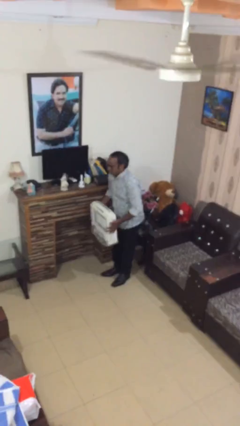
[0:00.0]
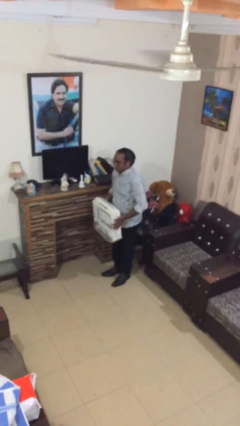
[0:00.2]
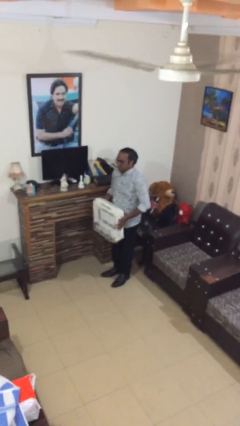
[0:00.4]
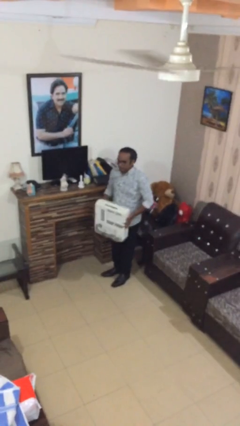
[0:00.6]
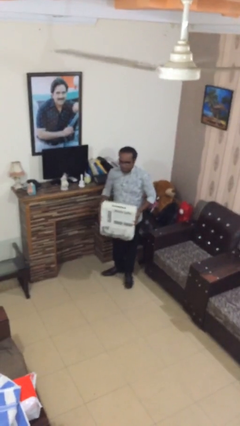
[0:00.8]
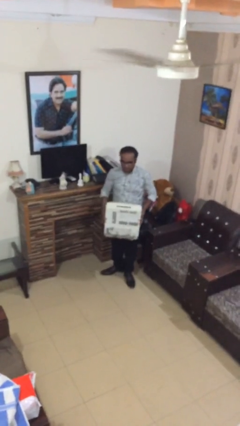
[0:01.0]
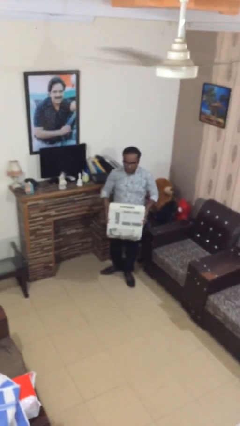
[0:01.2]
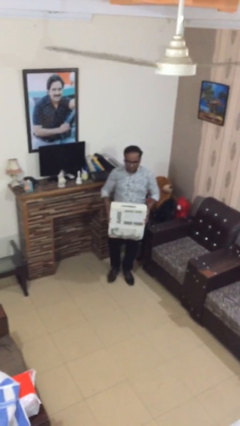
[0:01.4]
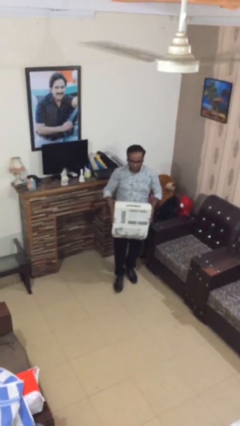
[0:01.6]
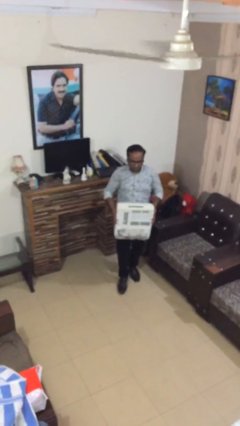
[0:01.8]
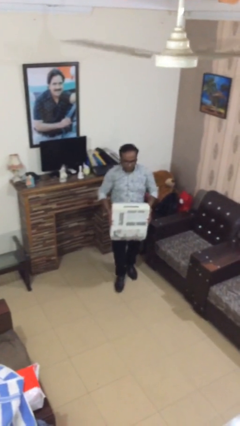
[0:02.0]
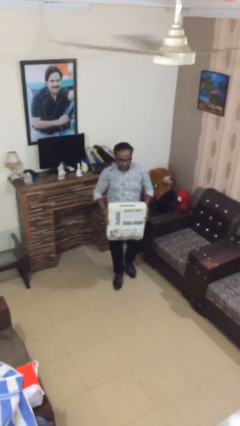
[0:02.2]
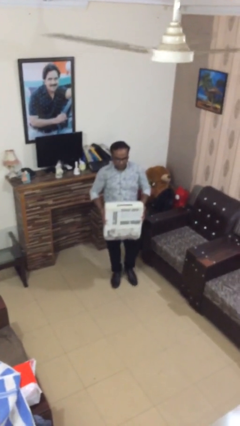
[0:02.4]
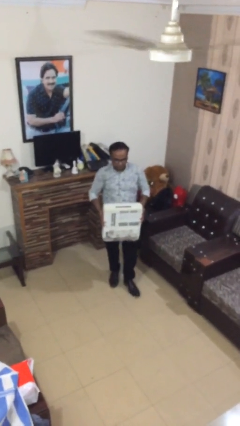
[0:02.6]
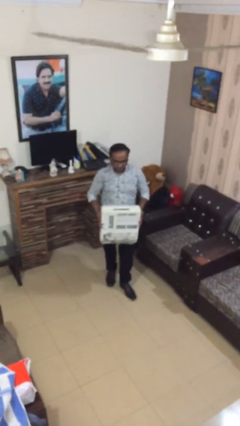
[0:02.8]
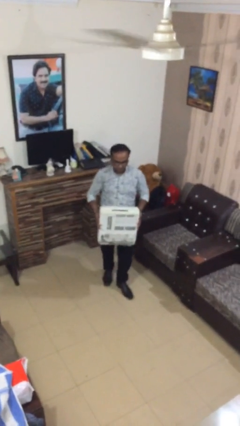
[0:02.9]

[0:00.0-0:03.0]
person carries heavy object

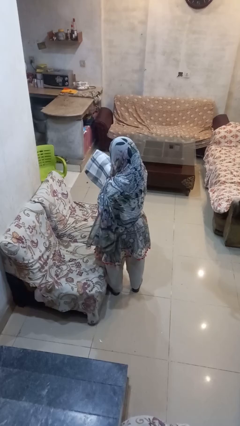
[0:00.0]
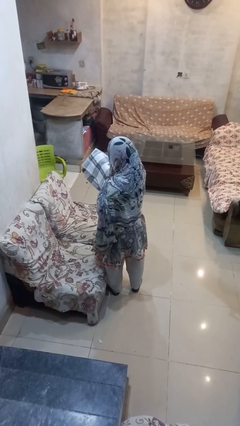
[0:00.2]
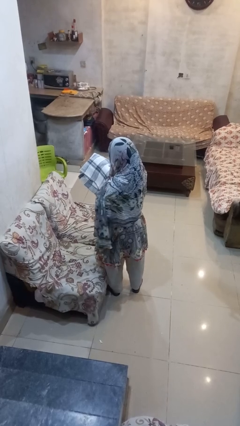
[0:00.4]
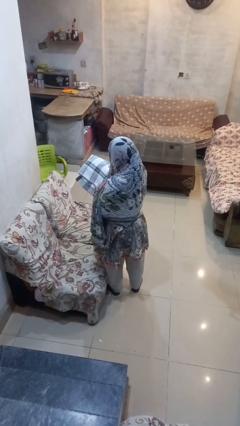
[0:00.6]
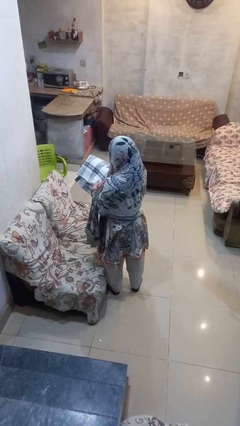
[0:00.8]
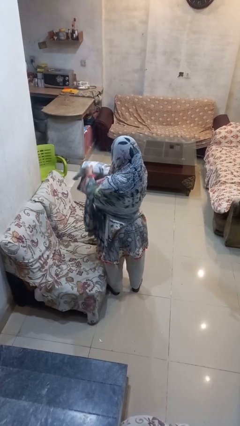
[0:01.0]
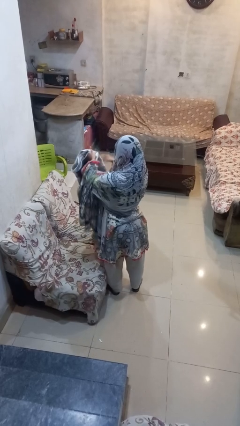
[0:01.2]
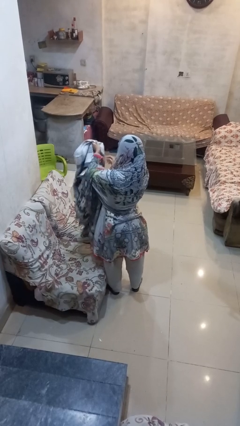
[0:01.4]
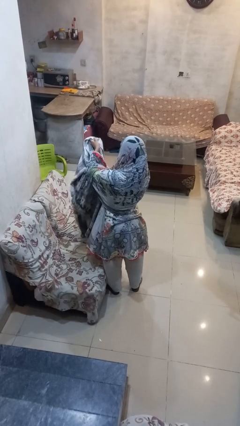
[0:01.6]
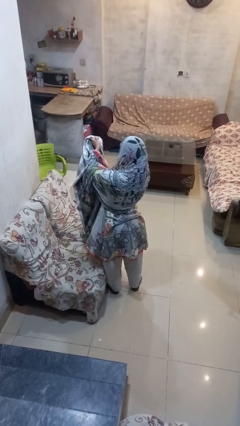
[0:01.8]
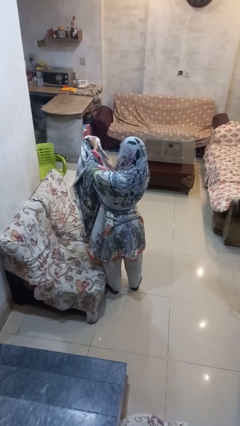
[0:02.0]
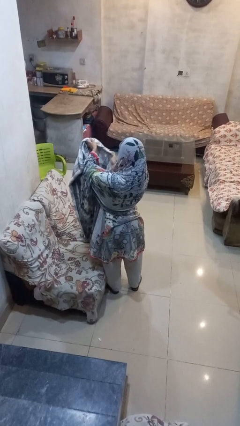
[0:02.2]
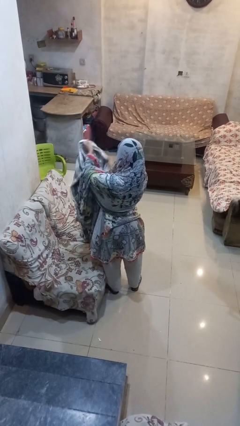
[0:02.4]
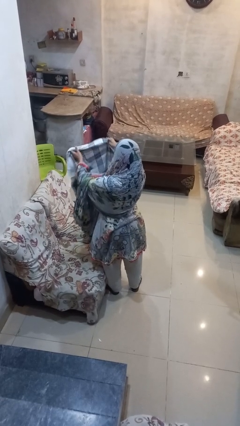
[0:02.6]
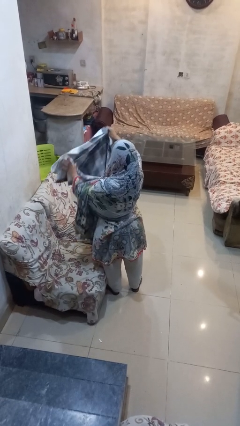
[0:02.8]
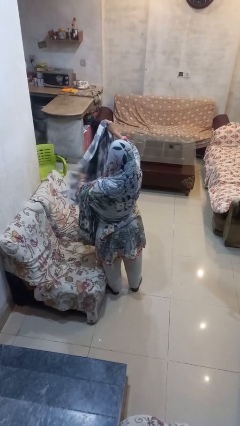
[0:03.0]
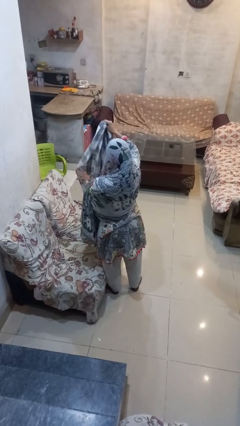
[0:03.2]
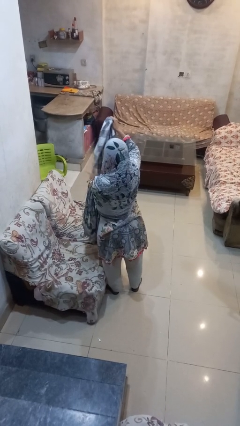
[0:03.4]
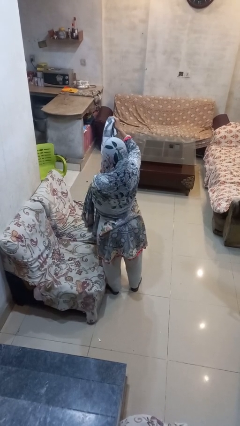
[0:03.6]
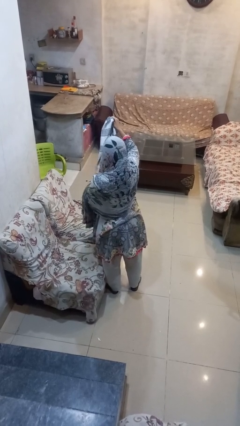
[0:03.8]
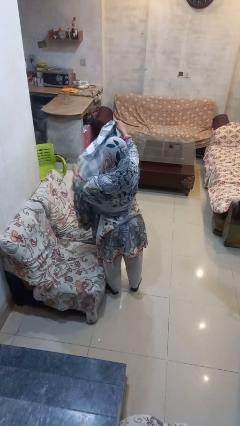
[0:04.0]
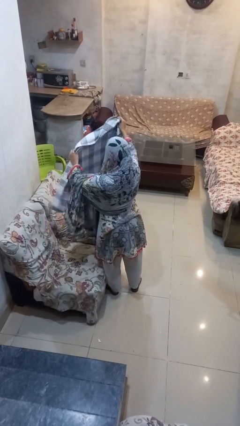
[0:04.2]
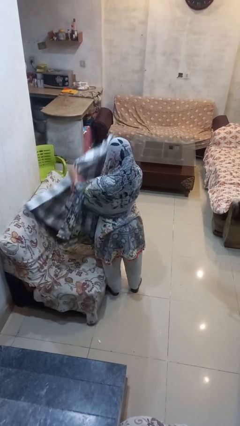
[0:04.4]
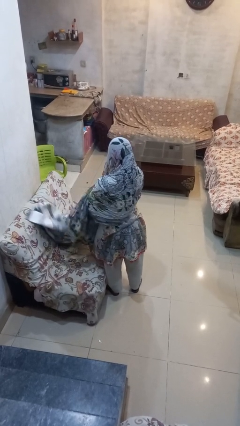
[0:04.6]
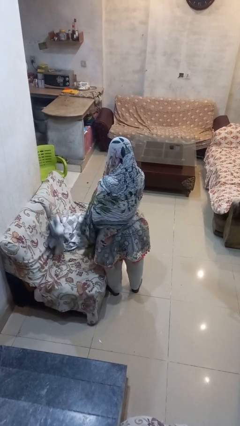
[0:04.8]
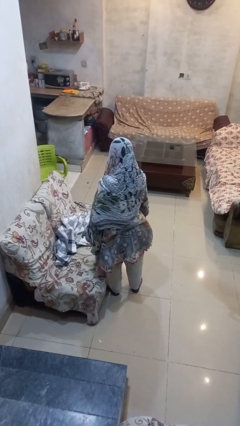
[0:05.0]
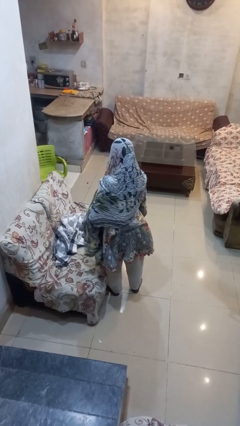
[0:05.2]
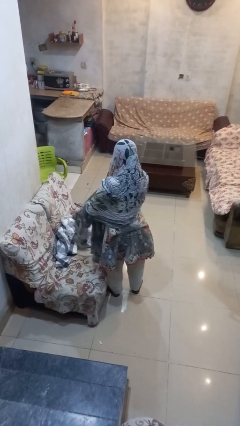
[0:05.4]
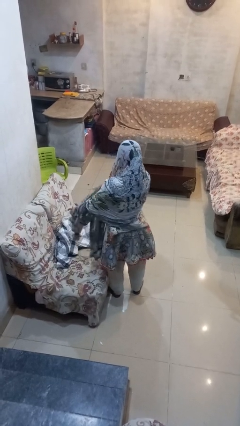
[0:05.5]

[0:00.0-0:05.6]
person unfolds blanket

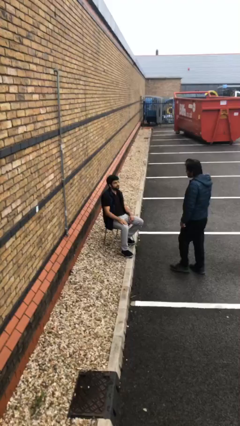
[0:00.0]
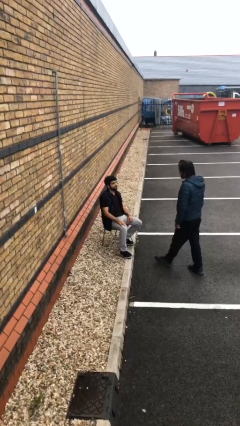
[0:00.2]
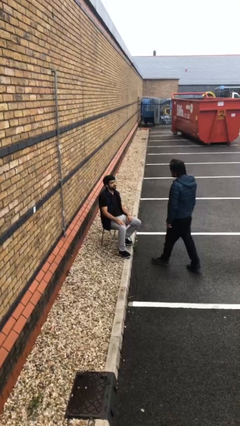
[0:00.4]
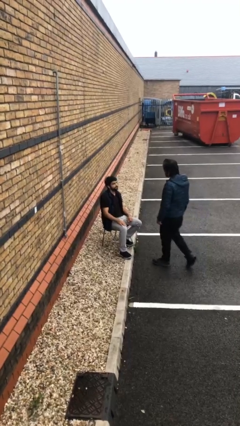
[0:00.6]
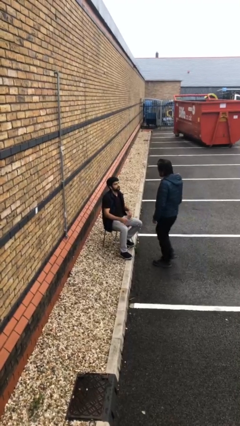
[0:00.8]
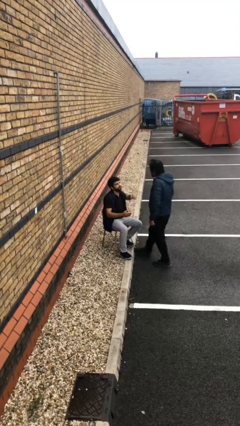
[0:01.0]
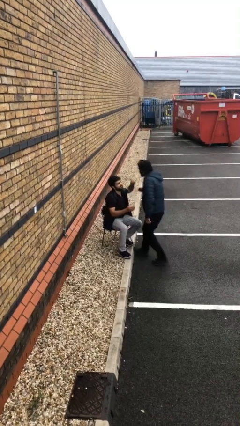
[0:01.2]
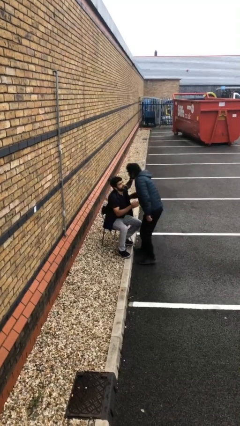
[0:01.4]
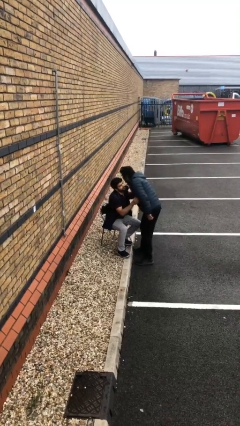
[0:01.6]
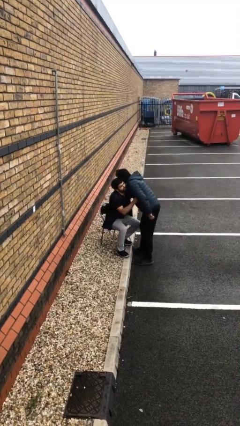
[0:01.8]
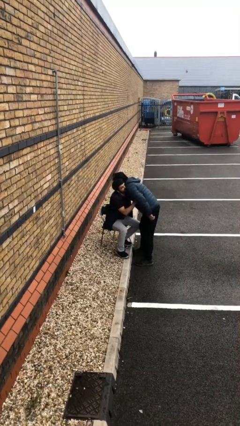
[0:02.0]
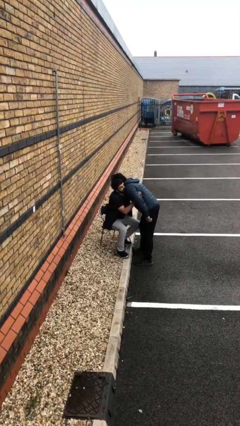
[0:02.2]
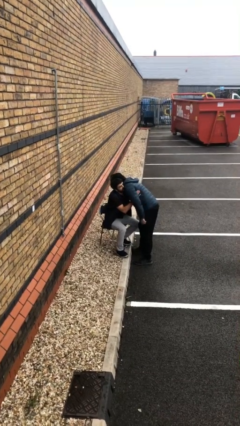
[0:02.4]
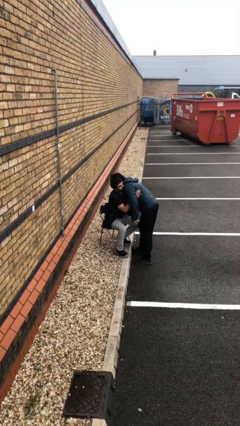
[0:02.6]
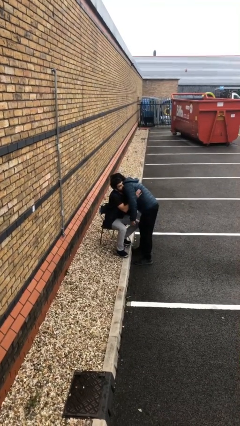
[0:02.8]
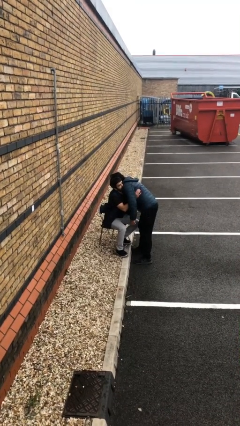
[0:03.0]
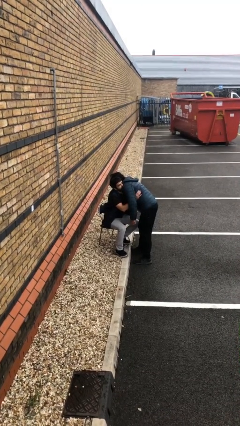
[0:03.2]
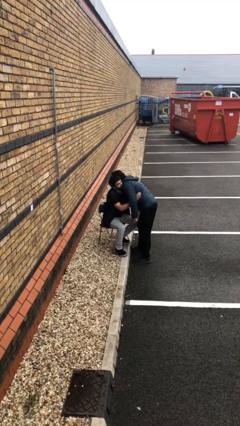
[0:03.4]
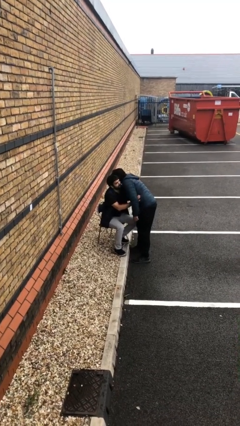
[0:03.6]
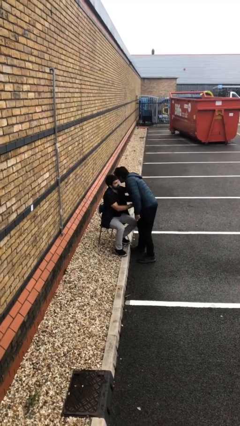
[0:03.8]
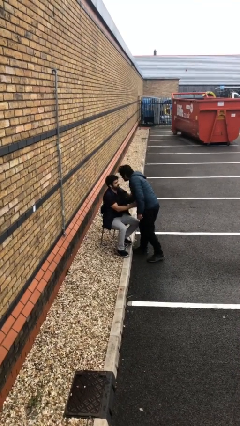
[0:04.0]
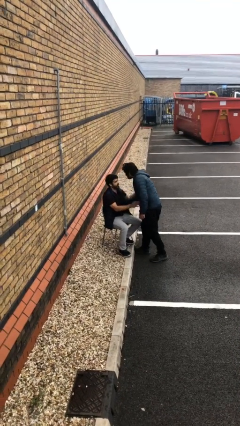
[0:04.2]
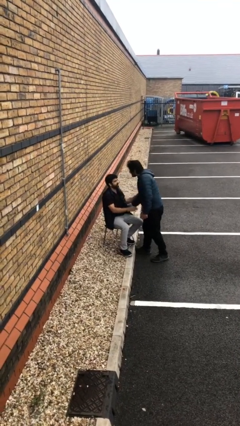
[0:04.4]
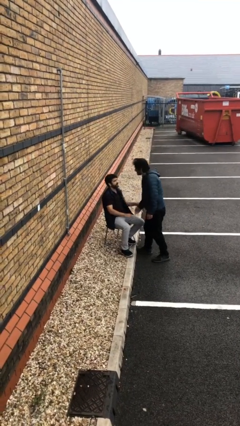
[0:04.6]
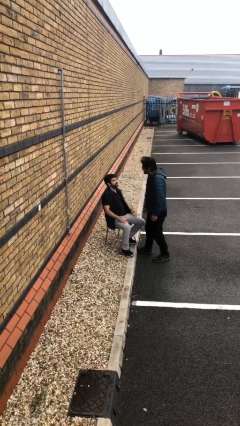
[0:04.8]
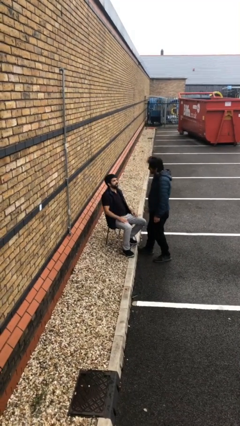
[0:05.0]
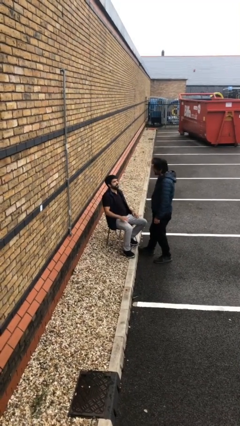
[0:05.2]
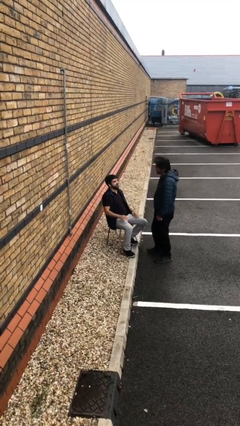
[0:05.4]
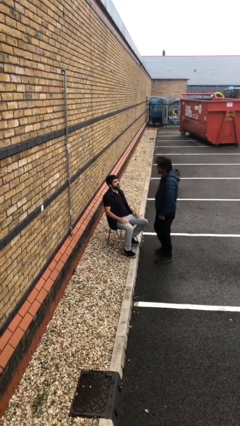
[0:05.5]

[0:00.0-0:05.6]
person embraces person

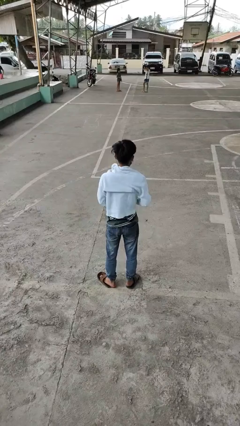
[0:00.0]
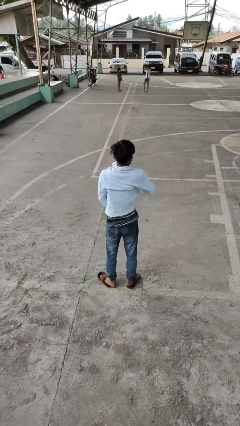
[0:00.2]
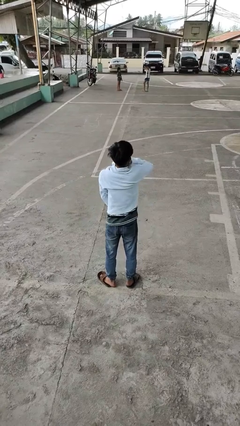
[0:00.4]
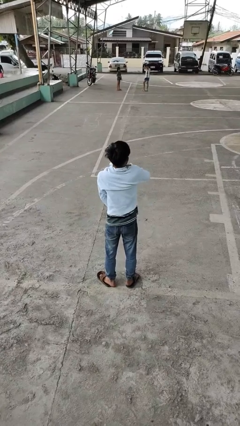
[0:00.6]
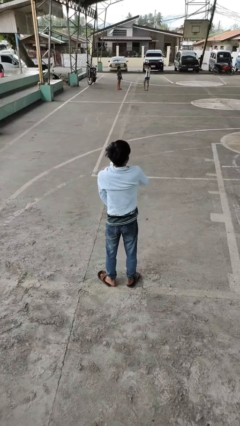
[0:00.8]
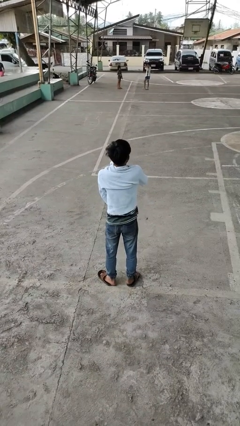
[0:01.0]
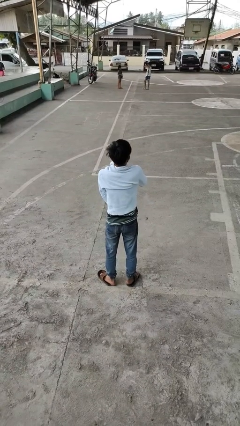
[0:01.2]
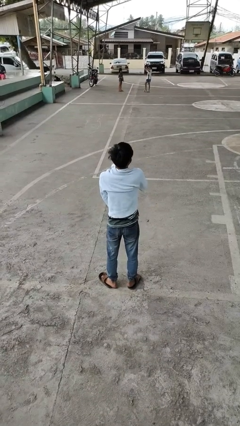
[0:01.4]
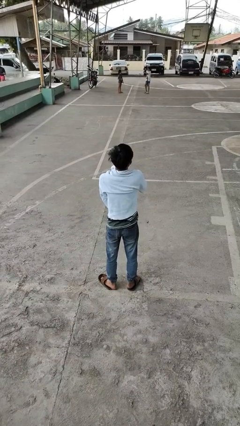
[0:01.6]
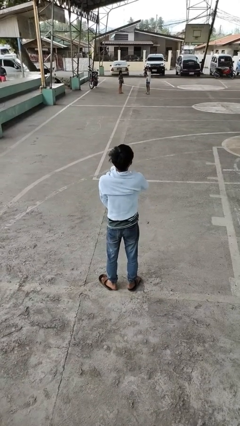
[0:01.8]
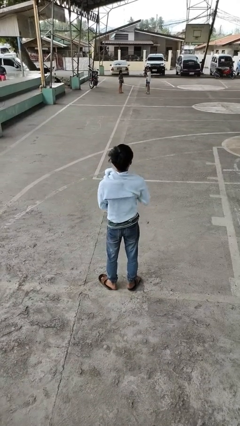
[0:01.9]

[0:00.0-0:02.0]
person zips up jacket

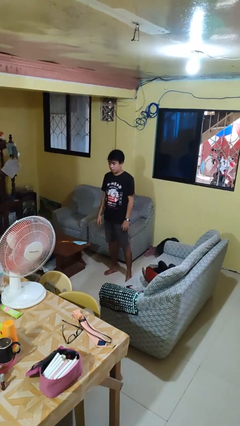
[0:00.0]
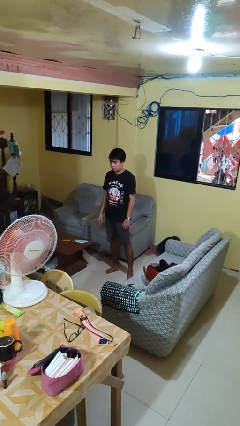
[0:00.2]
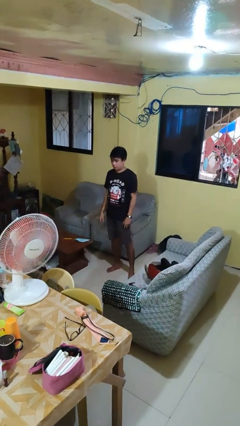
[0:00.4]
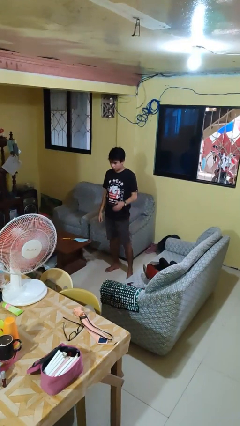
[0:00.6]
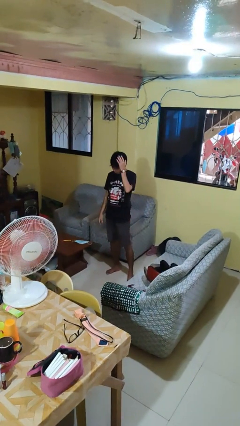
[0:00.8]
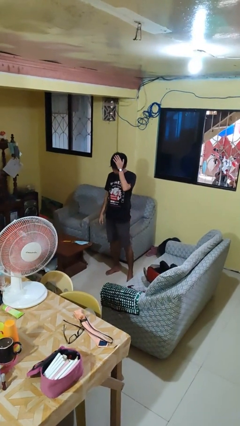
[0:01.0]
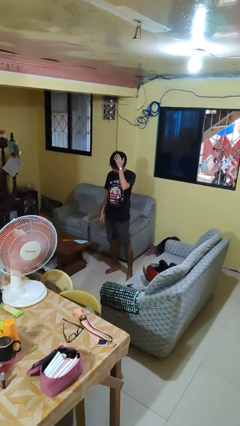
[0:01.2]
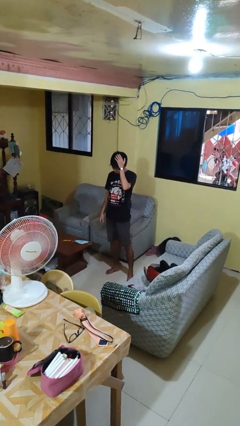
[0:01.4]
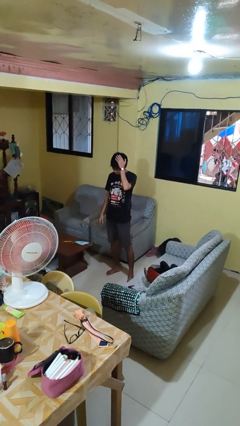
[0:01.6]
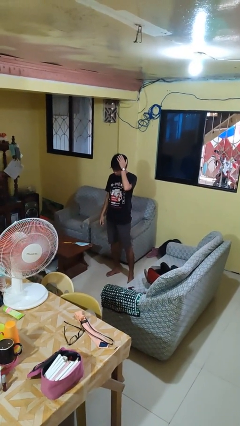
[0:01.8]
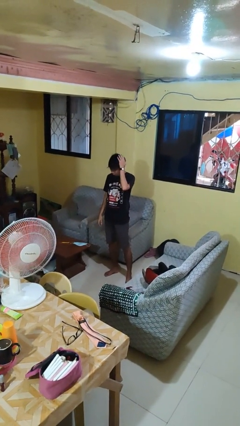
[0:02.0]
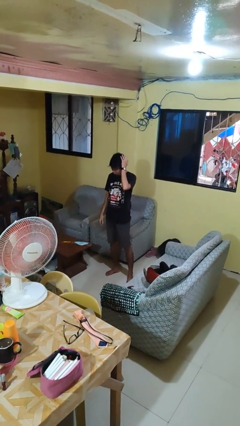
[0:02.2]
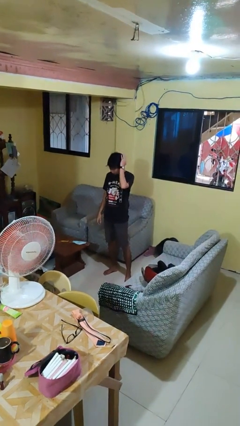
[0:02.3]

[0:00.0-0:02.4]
person pats head
